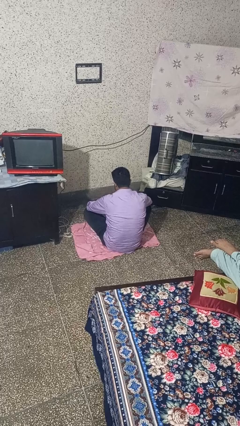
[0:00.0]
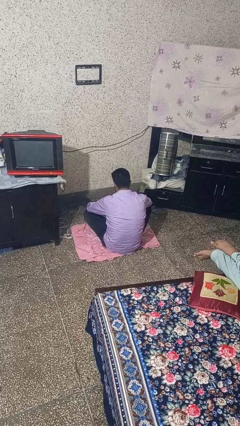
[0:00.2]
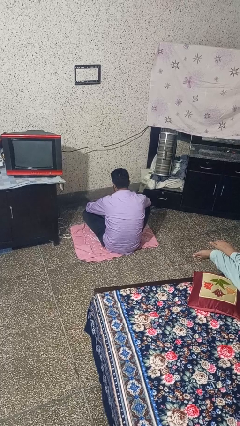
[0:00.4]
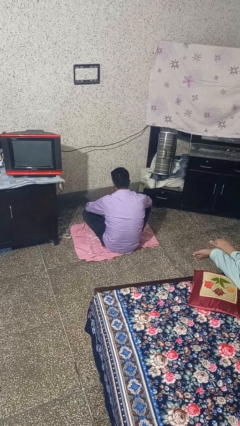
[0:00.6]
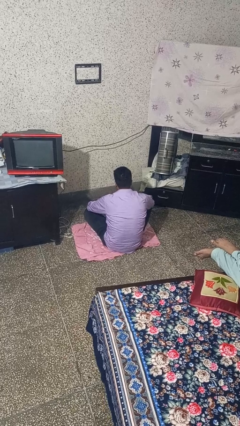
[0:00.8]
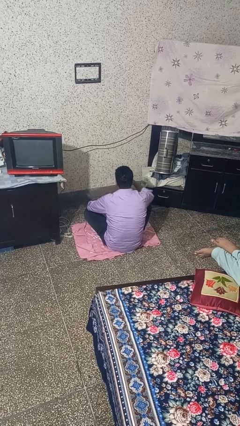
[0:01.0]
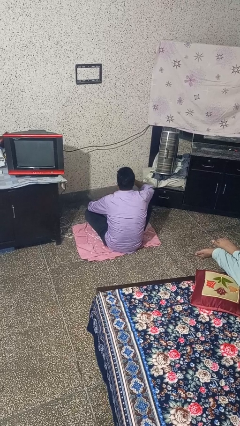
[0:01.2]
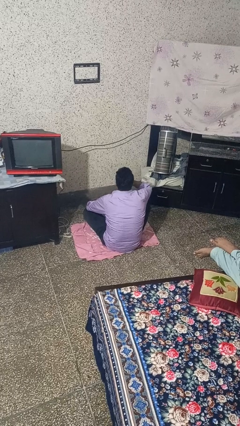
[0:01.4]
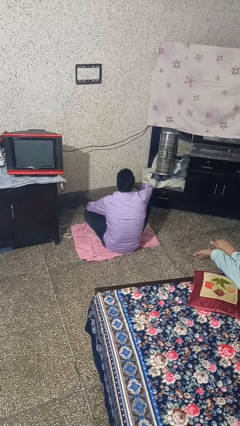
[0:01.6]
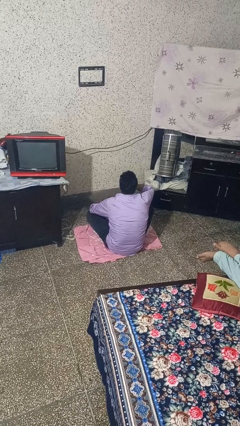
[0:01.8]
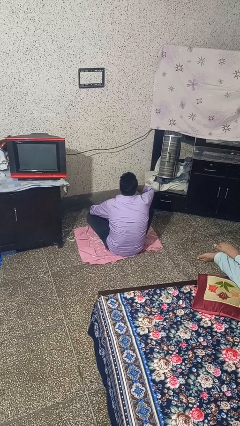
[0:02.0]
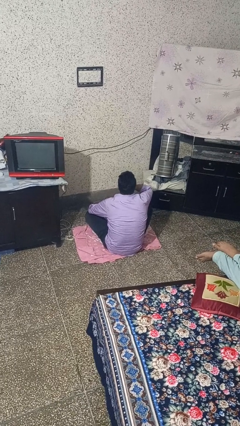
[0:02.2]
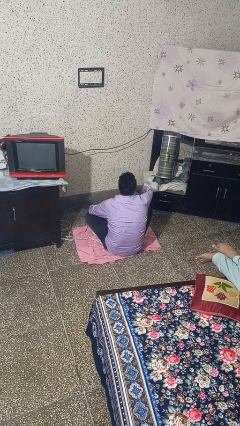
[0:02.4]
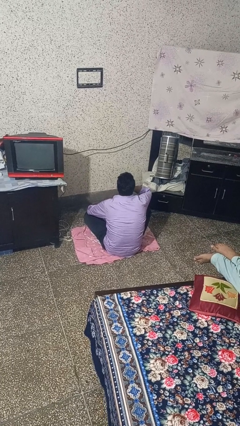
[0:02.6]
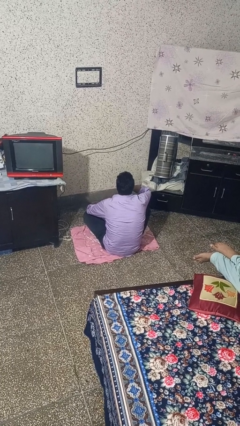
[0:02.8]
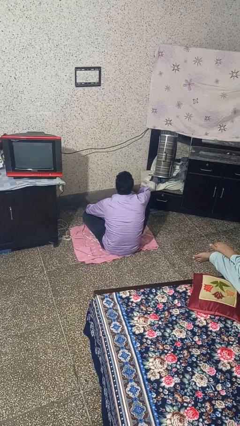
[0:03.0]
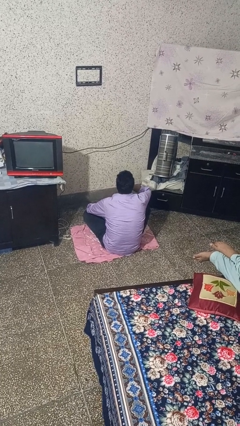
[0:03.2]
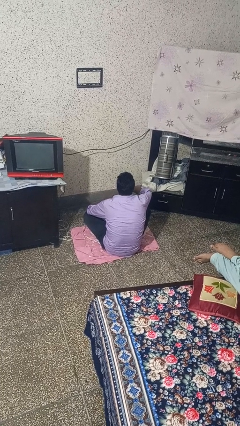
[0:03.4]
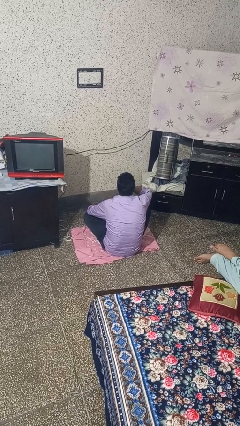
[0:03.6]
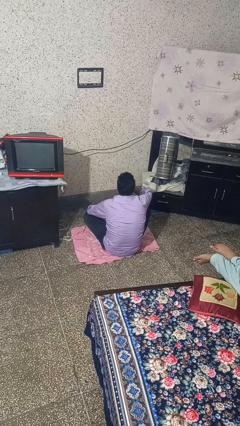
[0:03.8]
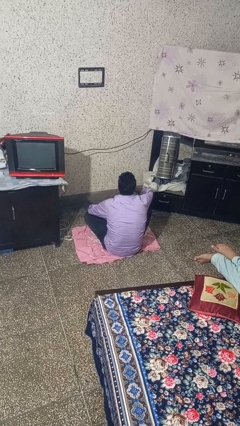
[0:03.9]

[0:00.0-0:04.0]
person yawns

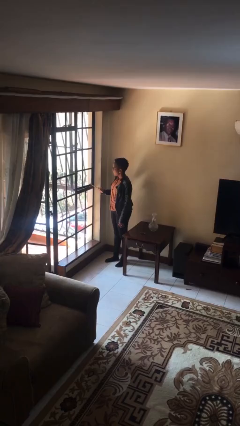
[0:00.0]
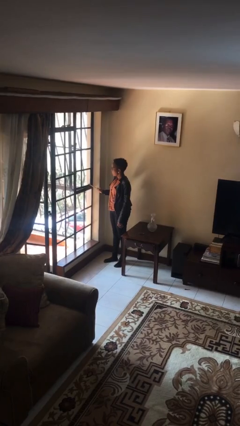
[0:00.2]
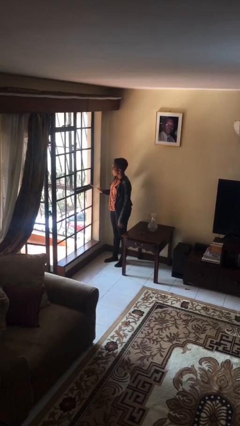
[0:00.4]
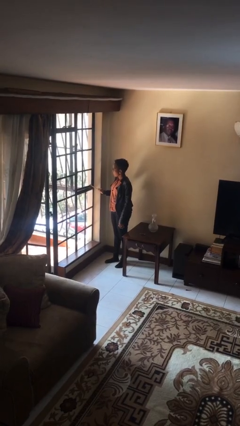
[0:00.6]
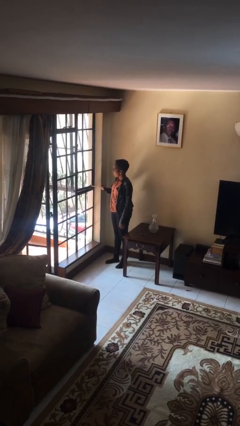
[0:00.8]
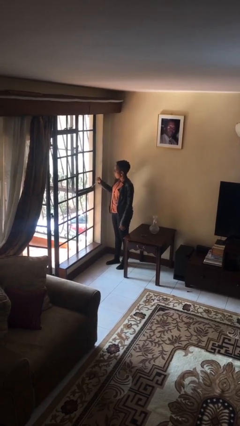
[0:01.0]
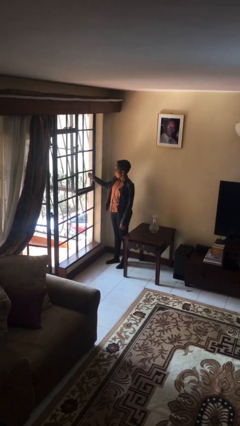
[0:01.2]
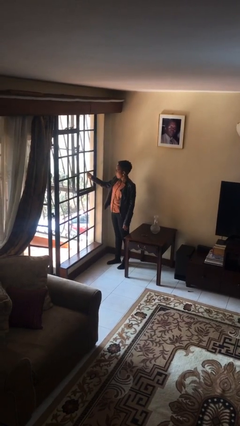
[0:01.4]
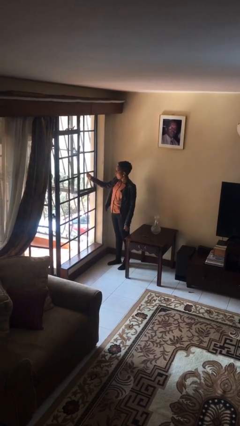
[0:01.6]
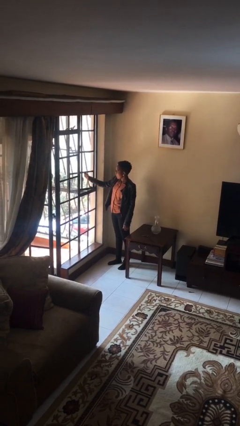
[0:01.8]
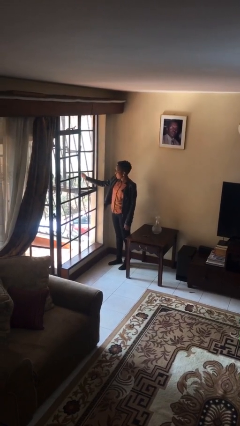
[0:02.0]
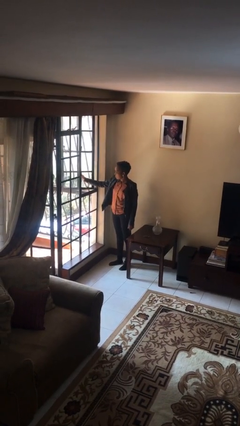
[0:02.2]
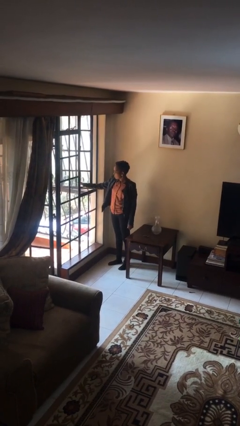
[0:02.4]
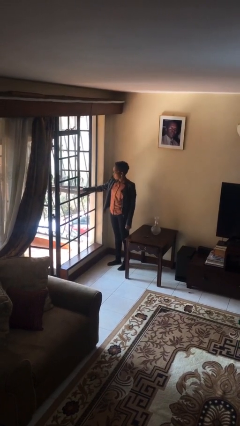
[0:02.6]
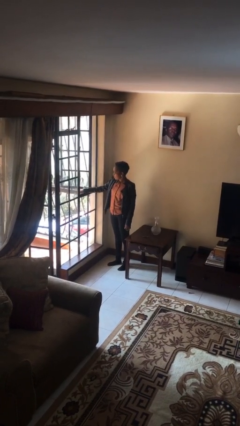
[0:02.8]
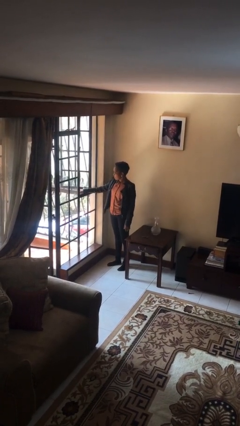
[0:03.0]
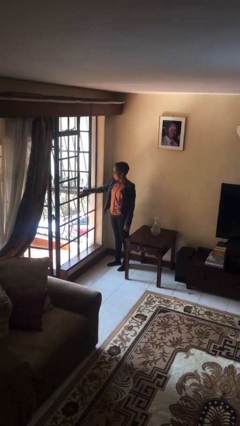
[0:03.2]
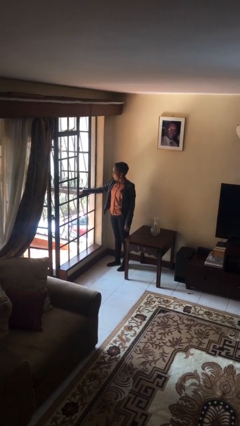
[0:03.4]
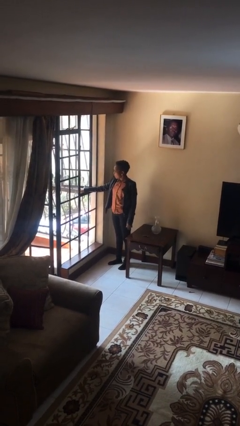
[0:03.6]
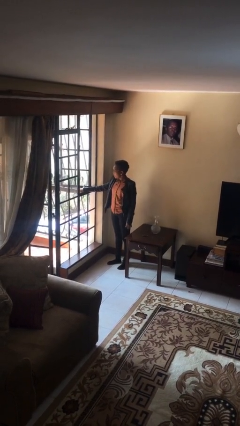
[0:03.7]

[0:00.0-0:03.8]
person opens home window

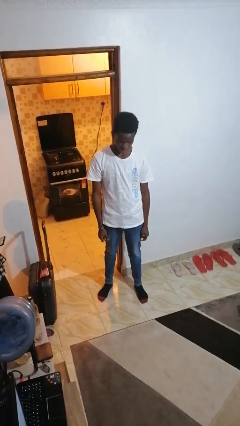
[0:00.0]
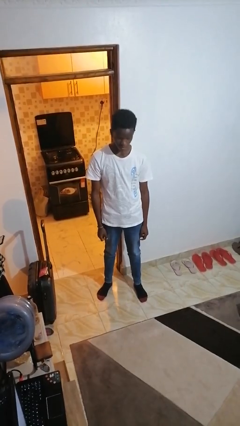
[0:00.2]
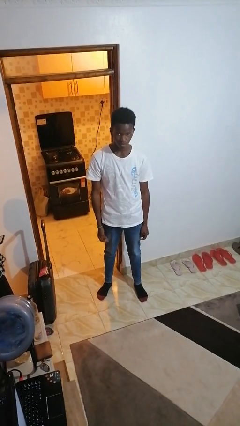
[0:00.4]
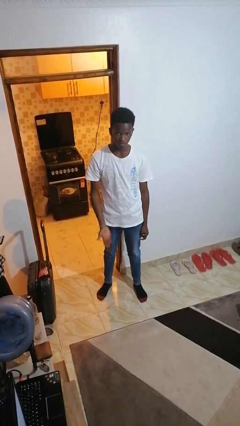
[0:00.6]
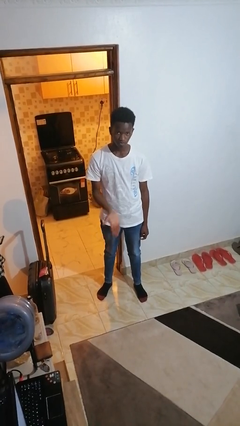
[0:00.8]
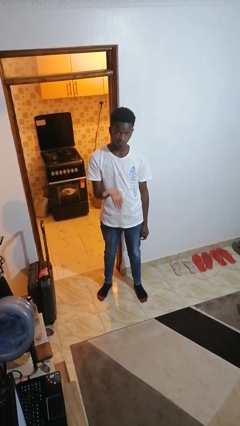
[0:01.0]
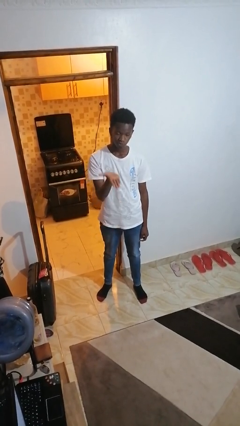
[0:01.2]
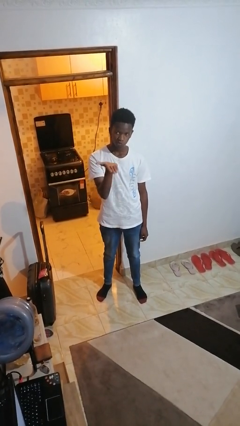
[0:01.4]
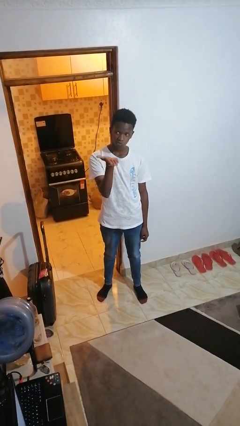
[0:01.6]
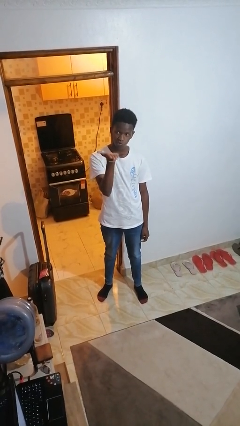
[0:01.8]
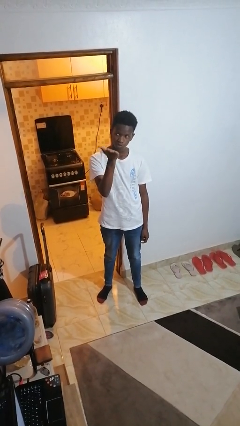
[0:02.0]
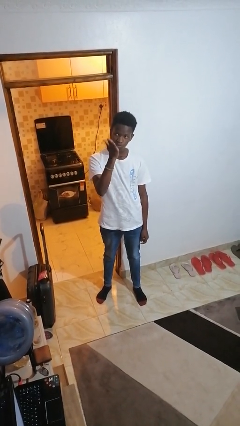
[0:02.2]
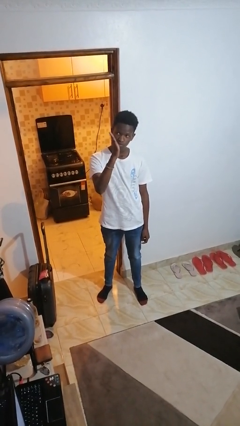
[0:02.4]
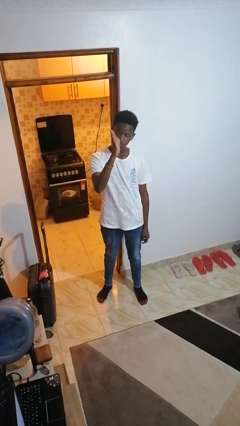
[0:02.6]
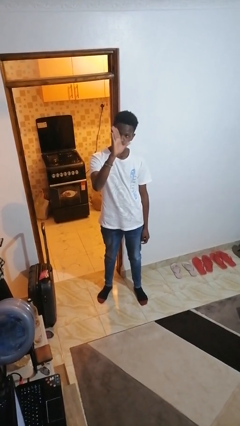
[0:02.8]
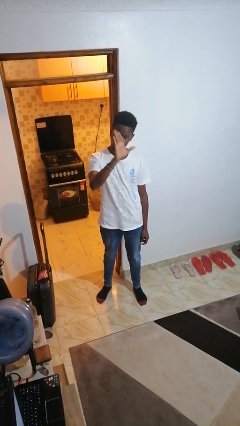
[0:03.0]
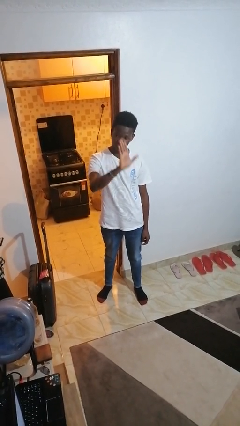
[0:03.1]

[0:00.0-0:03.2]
person gestures swipe up

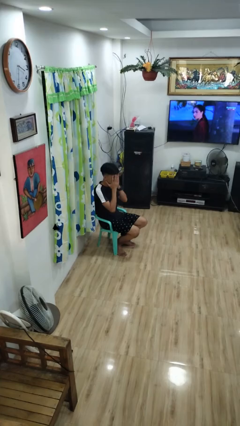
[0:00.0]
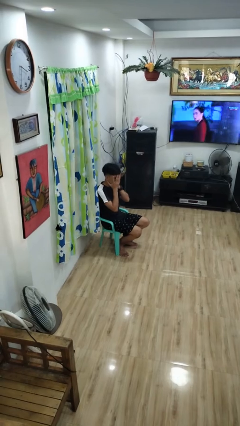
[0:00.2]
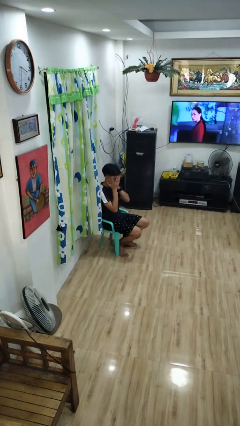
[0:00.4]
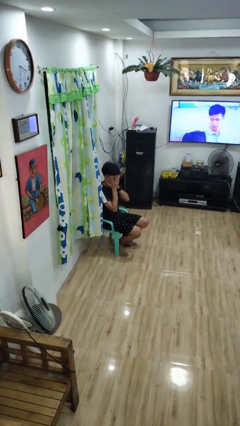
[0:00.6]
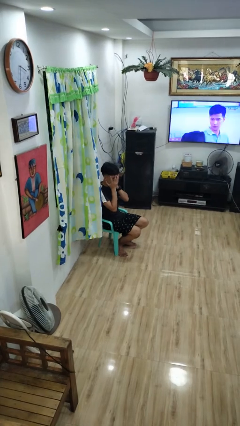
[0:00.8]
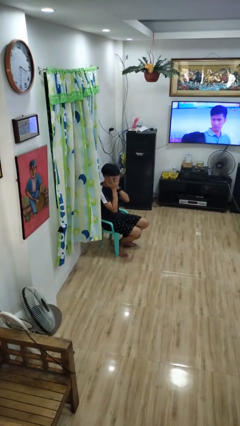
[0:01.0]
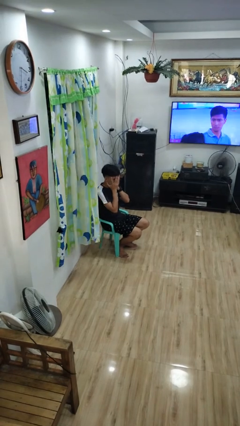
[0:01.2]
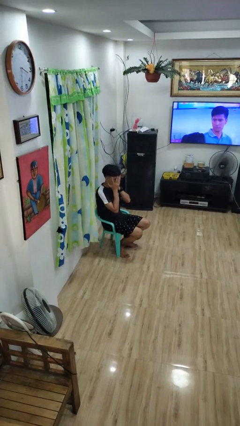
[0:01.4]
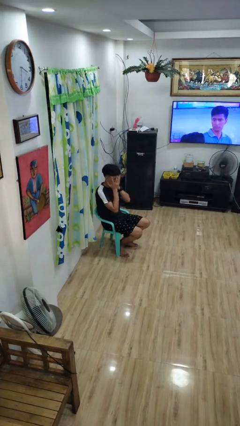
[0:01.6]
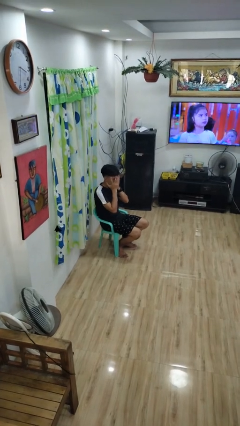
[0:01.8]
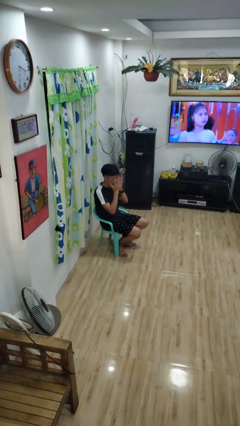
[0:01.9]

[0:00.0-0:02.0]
person covers face with hands

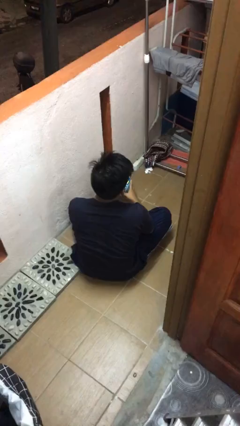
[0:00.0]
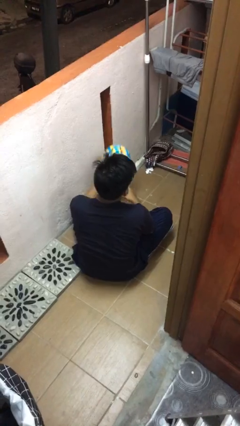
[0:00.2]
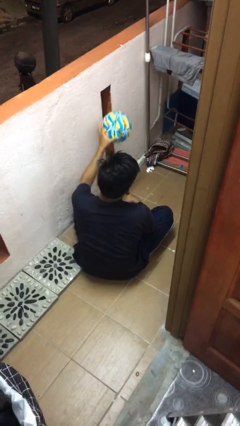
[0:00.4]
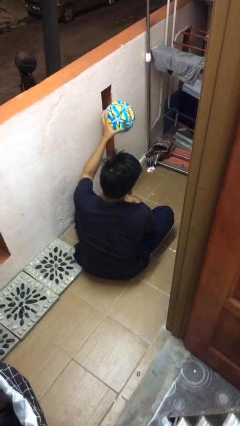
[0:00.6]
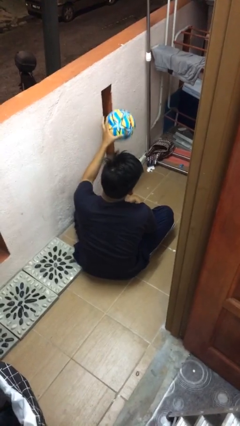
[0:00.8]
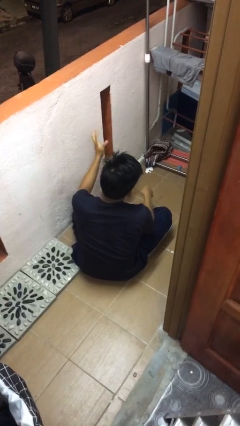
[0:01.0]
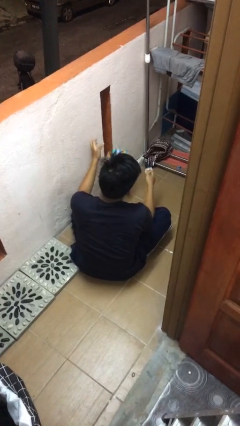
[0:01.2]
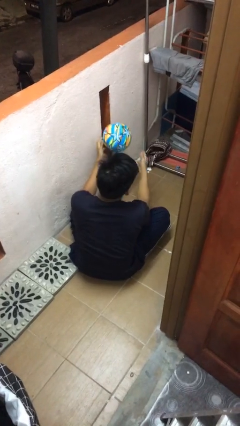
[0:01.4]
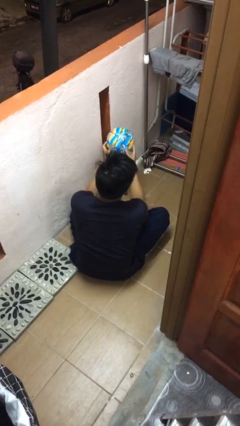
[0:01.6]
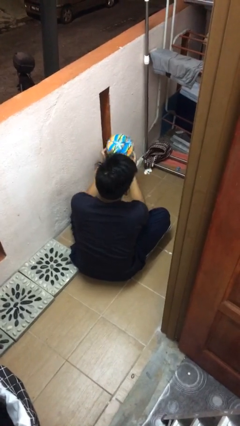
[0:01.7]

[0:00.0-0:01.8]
person bounces ball on floor

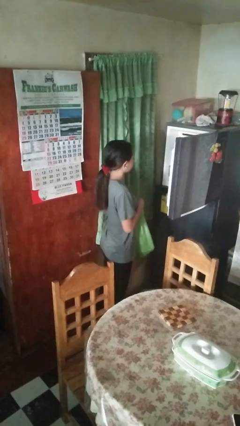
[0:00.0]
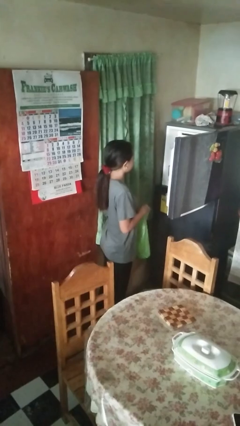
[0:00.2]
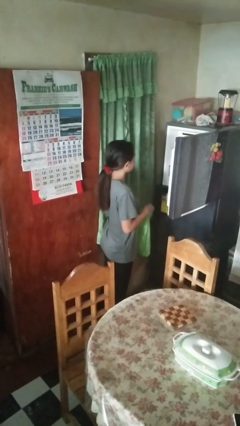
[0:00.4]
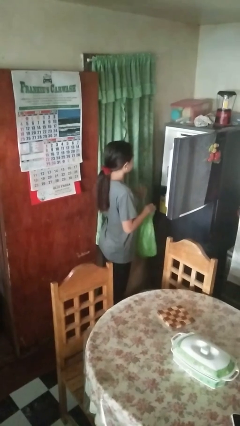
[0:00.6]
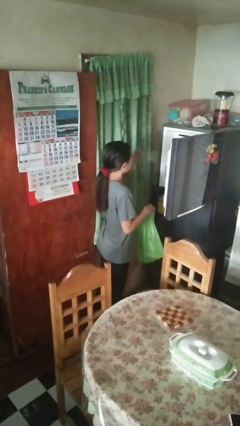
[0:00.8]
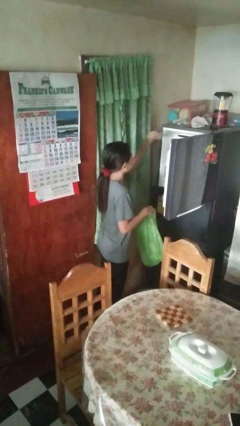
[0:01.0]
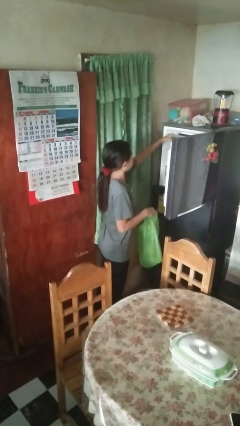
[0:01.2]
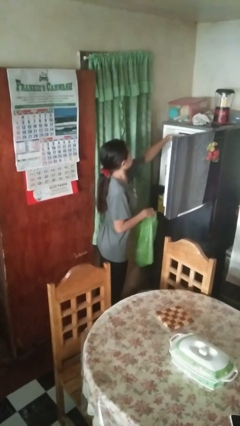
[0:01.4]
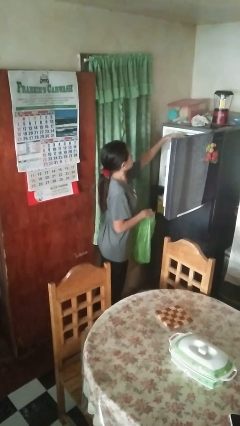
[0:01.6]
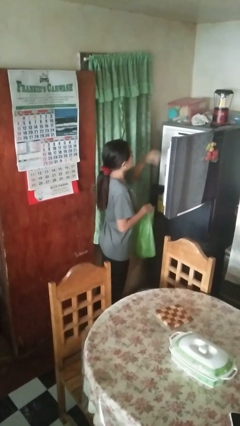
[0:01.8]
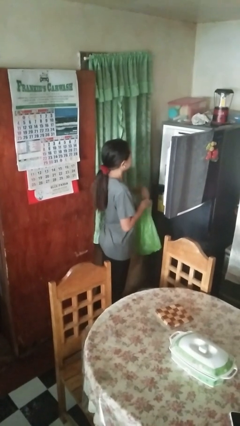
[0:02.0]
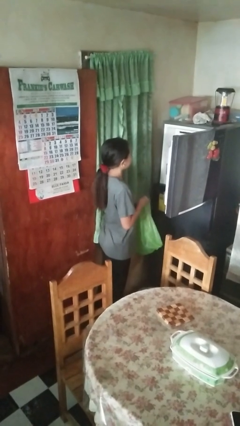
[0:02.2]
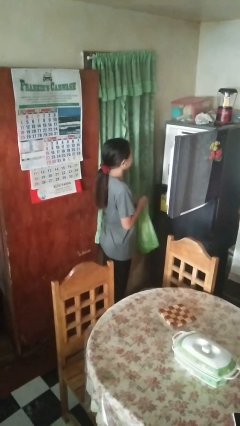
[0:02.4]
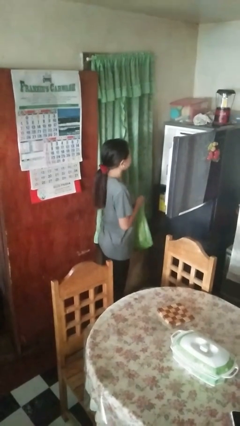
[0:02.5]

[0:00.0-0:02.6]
person loads groceries into refrigerator
